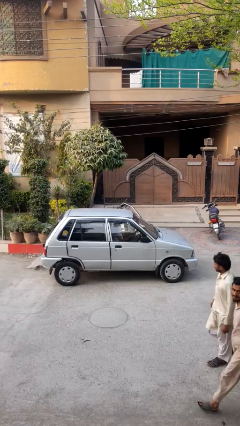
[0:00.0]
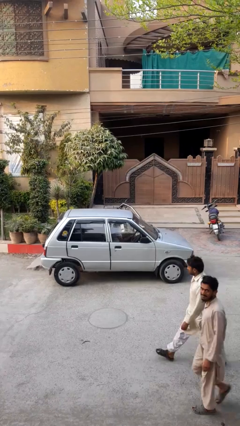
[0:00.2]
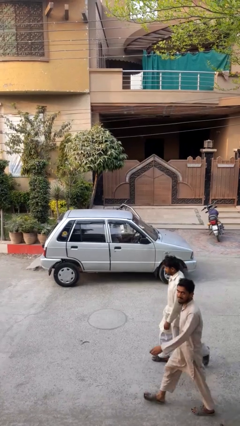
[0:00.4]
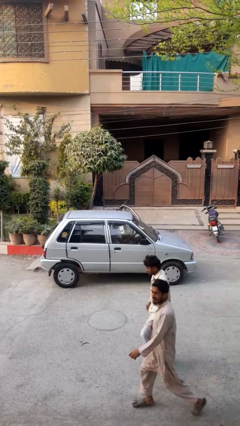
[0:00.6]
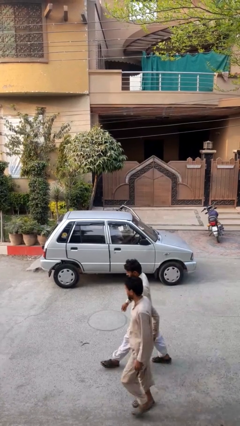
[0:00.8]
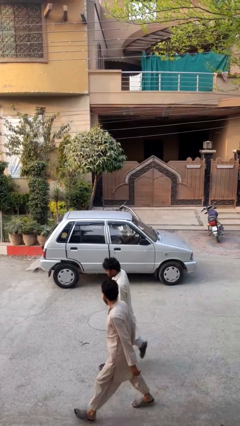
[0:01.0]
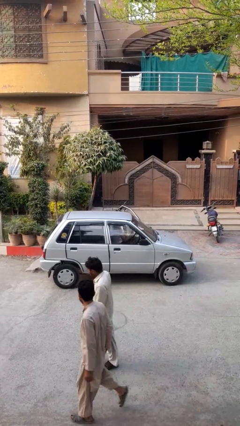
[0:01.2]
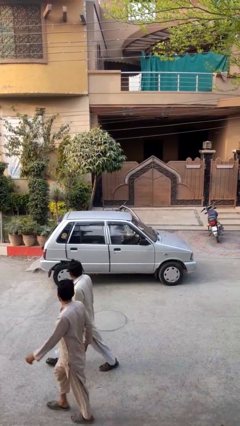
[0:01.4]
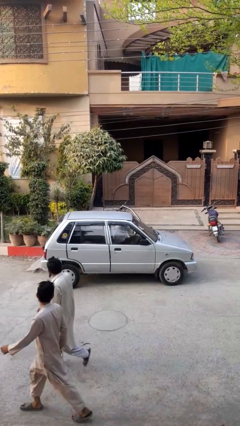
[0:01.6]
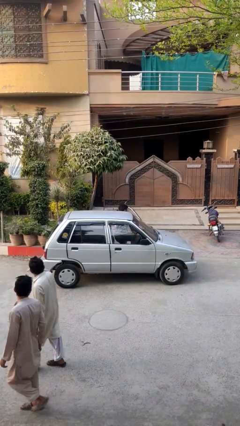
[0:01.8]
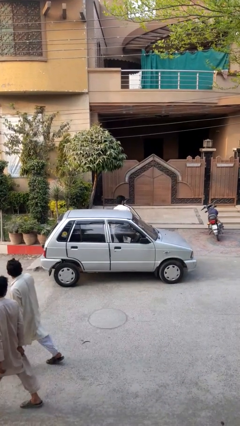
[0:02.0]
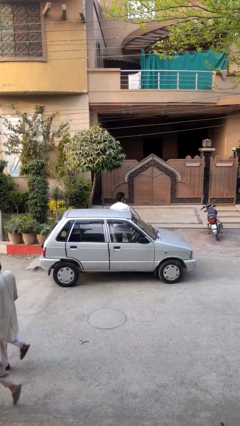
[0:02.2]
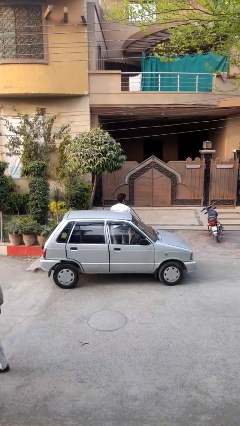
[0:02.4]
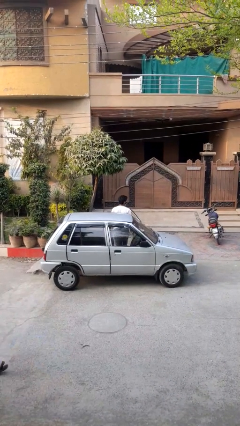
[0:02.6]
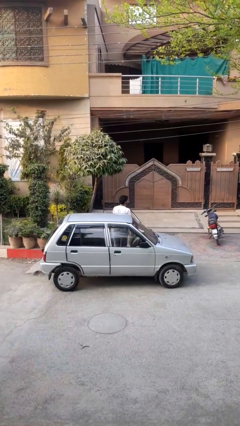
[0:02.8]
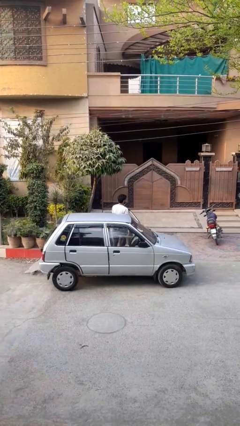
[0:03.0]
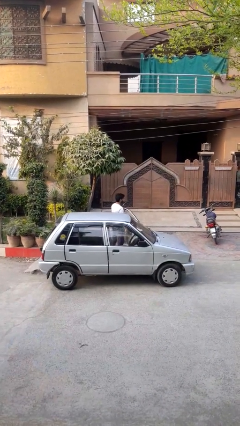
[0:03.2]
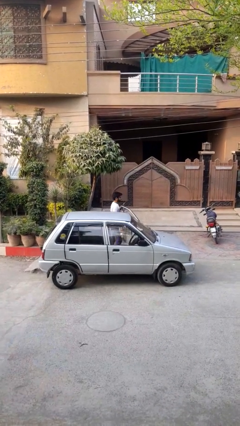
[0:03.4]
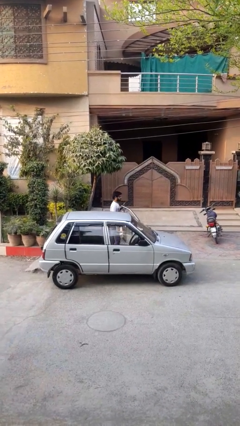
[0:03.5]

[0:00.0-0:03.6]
person exits car

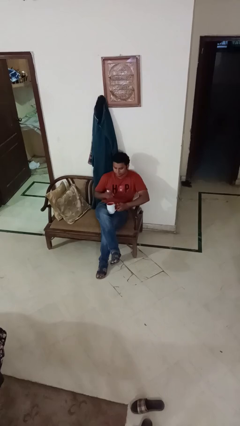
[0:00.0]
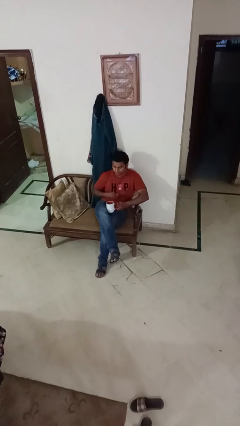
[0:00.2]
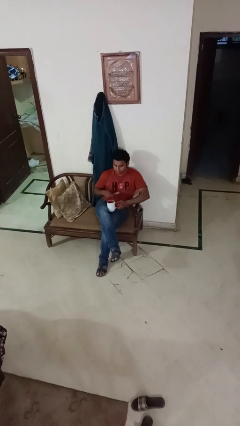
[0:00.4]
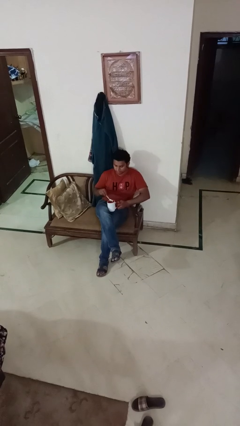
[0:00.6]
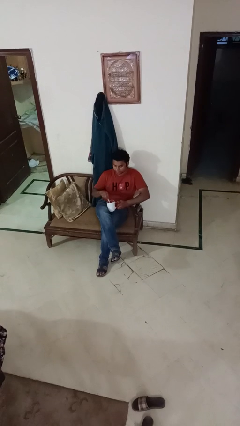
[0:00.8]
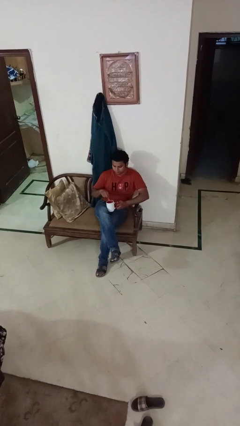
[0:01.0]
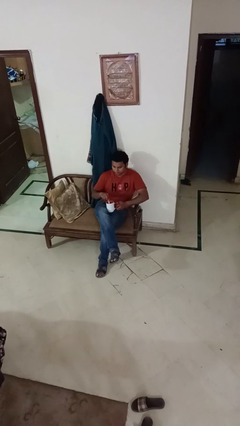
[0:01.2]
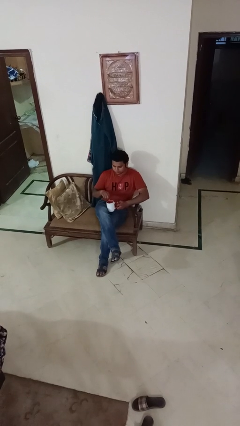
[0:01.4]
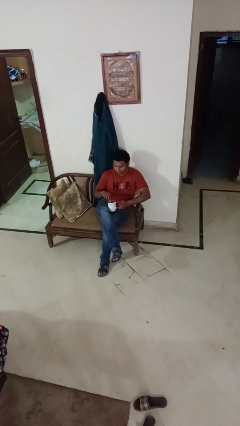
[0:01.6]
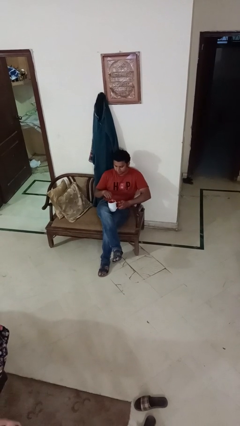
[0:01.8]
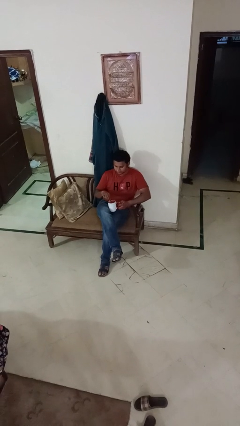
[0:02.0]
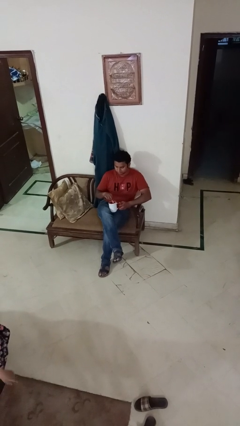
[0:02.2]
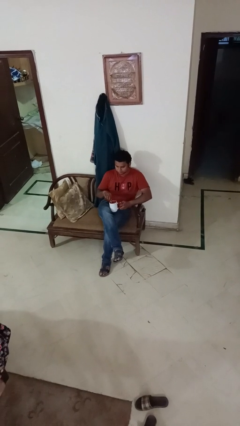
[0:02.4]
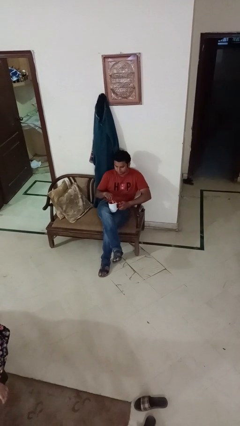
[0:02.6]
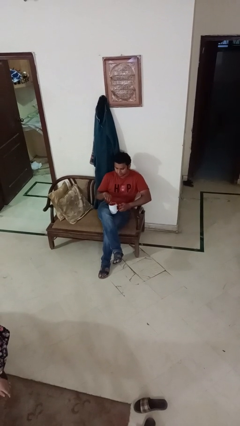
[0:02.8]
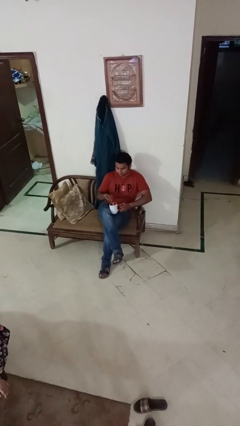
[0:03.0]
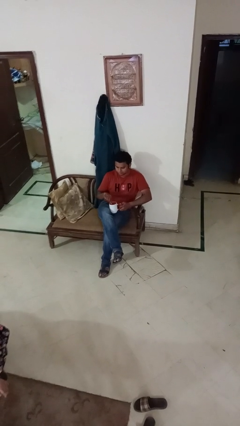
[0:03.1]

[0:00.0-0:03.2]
person stirs mug

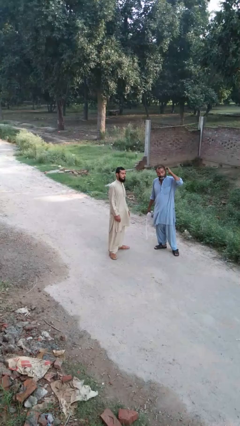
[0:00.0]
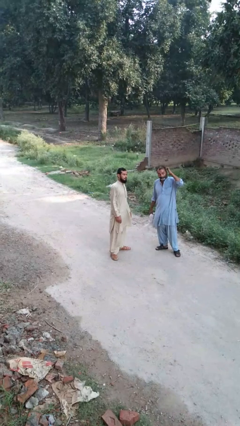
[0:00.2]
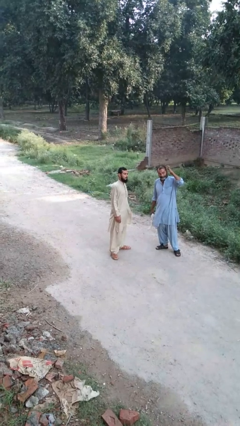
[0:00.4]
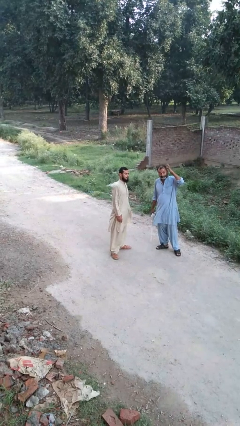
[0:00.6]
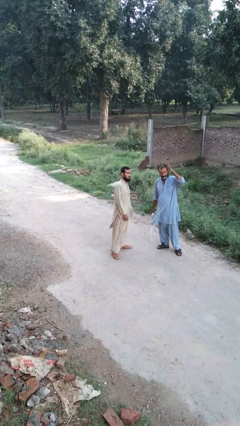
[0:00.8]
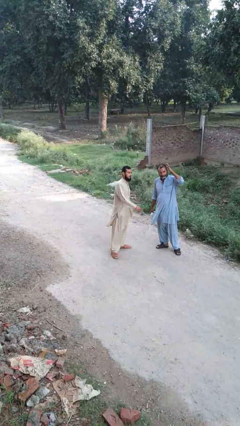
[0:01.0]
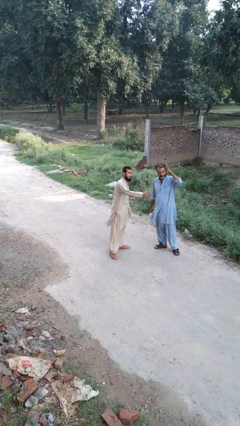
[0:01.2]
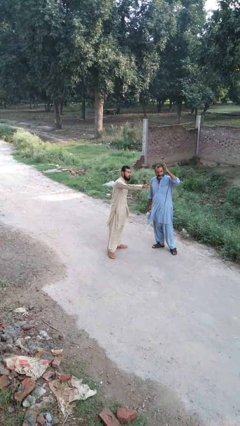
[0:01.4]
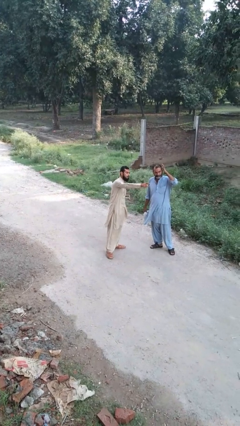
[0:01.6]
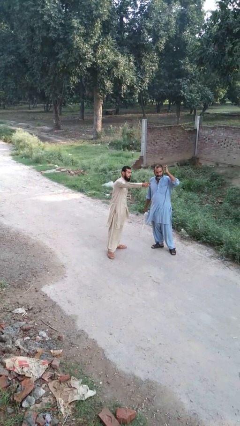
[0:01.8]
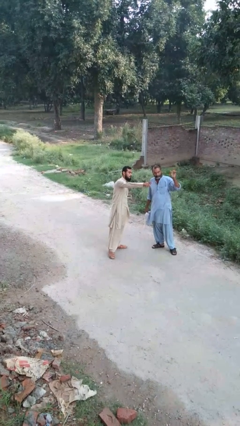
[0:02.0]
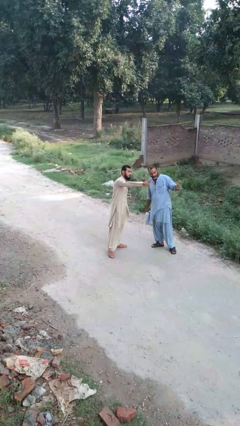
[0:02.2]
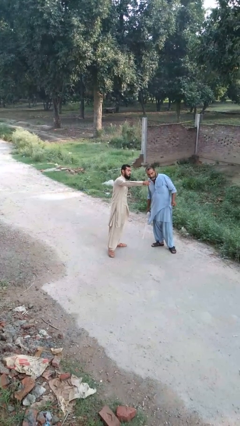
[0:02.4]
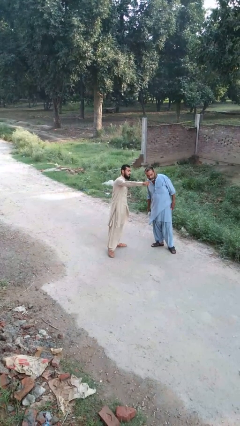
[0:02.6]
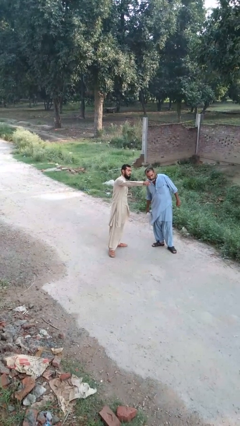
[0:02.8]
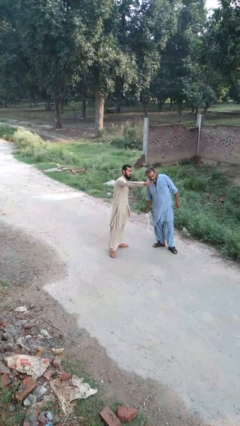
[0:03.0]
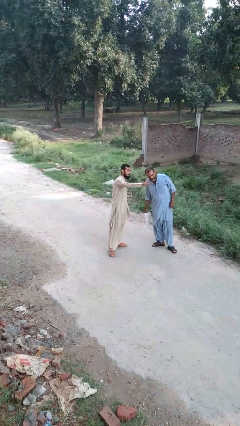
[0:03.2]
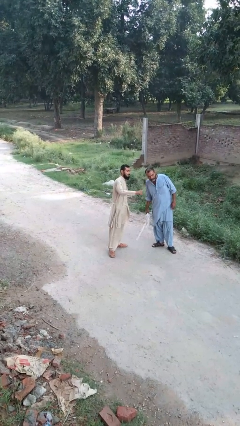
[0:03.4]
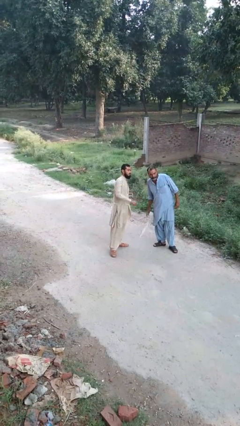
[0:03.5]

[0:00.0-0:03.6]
person points at person

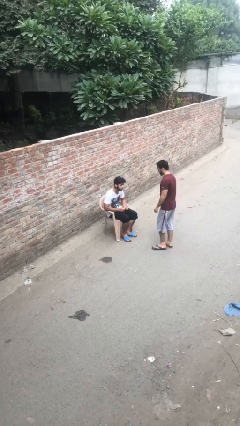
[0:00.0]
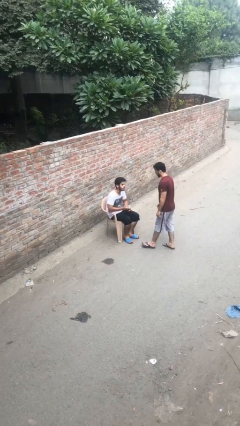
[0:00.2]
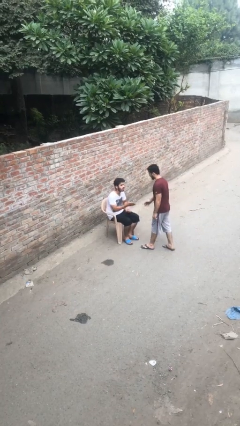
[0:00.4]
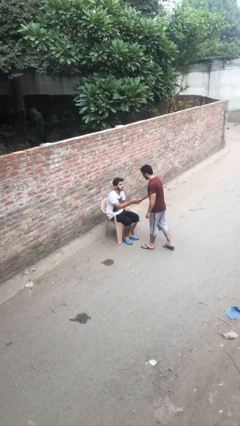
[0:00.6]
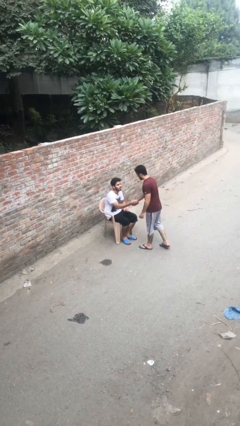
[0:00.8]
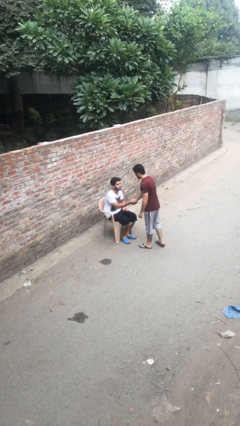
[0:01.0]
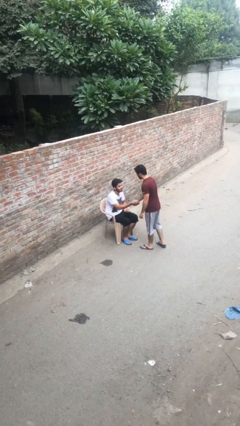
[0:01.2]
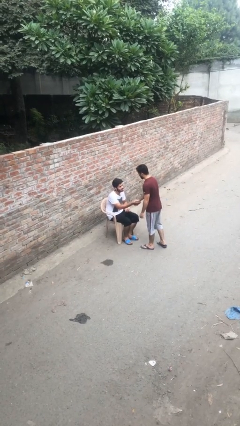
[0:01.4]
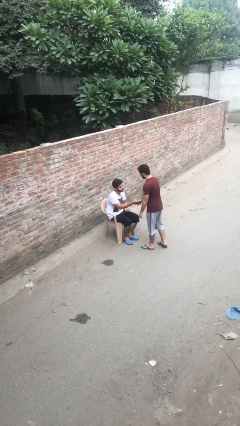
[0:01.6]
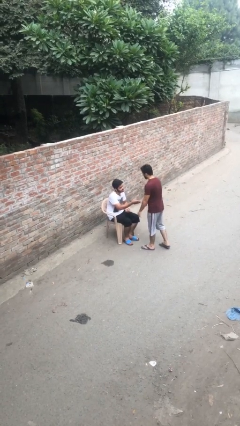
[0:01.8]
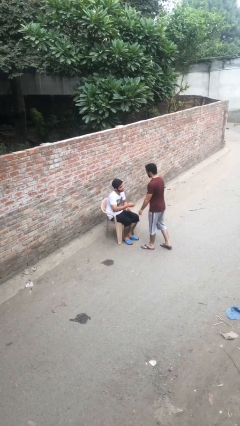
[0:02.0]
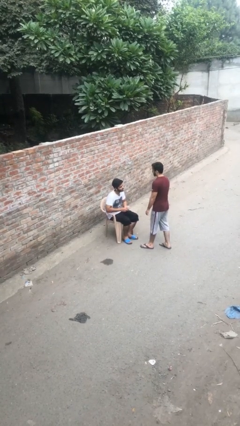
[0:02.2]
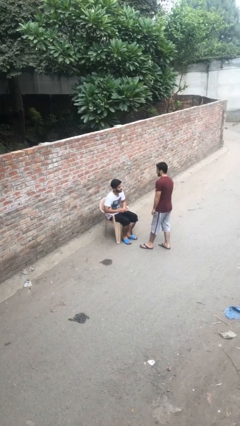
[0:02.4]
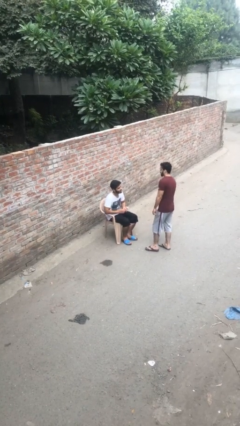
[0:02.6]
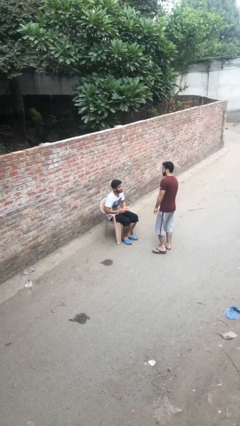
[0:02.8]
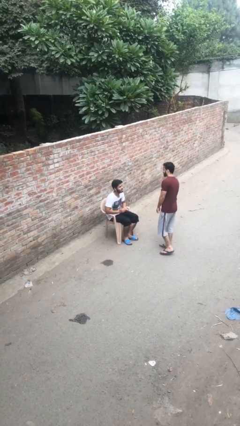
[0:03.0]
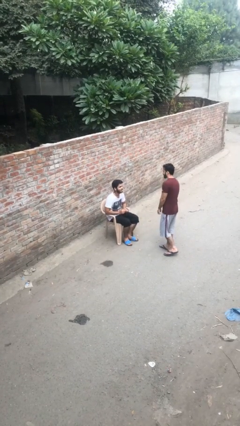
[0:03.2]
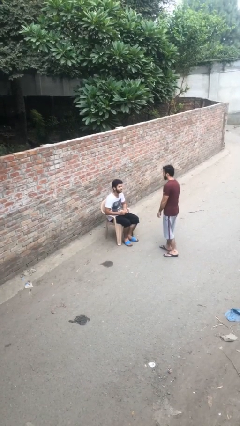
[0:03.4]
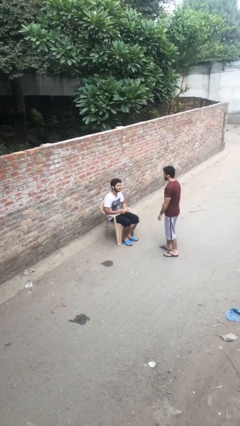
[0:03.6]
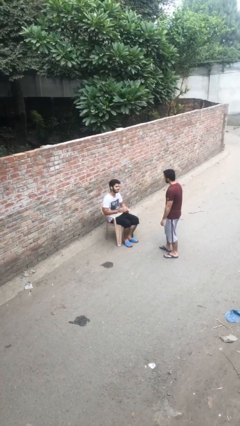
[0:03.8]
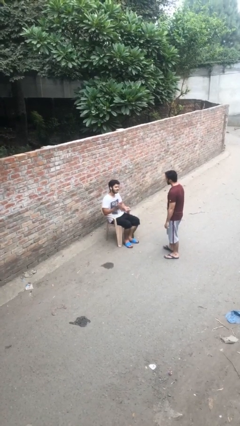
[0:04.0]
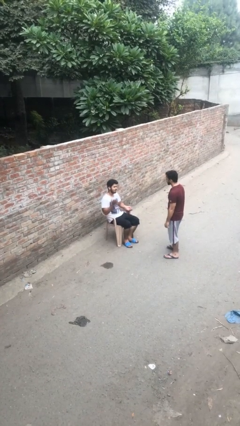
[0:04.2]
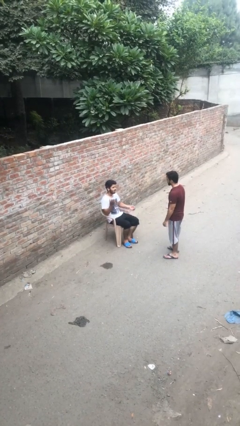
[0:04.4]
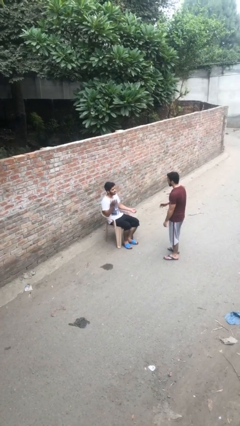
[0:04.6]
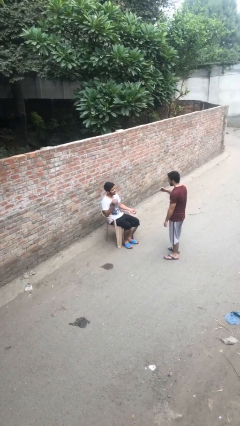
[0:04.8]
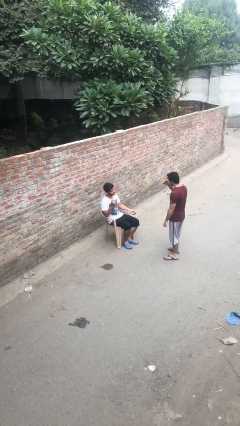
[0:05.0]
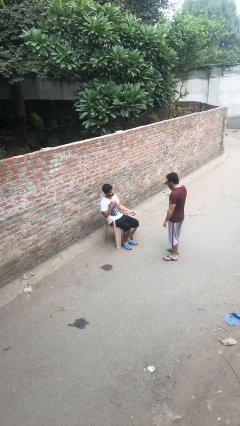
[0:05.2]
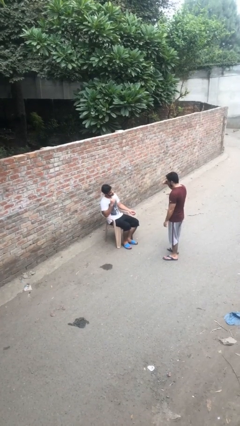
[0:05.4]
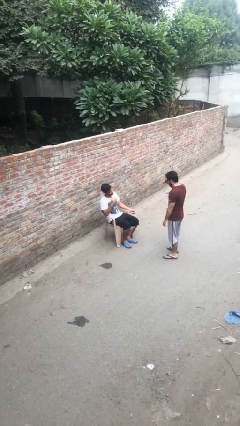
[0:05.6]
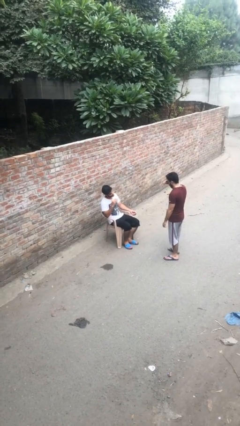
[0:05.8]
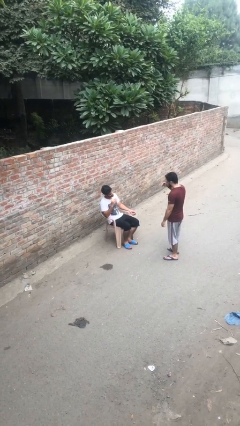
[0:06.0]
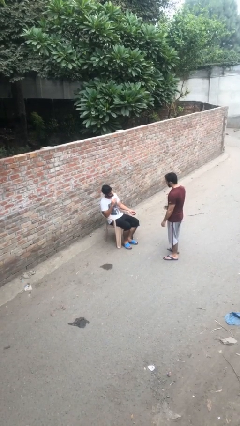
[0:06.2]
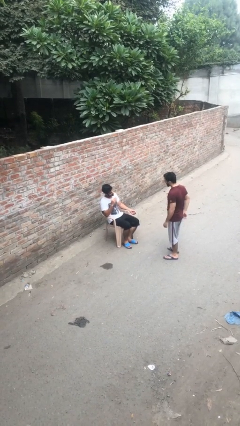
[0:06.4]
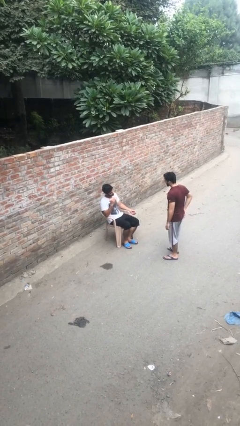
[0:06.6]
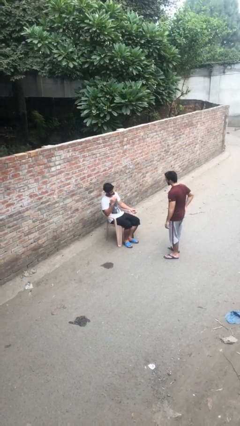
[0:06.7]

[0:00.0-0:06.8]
person shakes hand

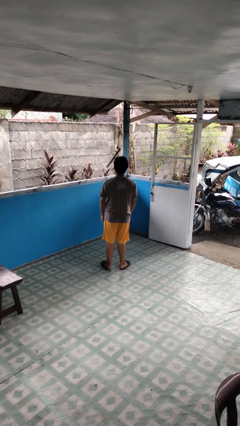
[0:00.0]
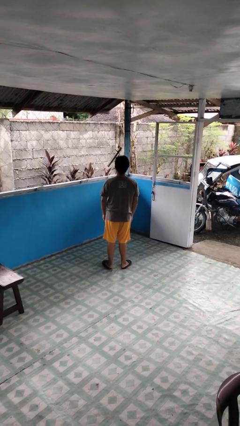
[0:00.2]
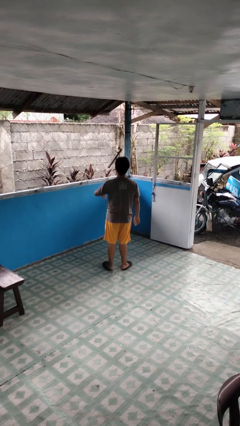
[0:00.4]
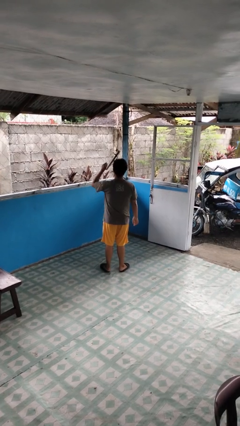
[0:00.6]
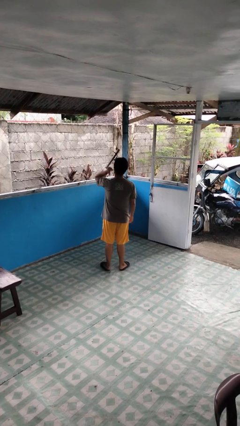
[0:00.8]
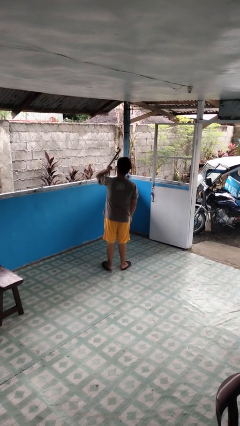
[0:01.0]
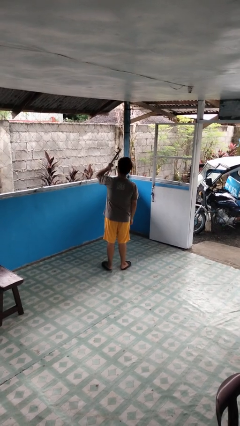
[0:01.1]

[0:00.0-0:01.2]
person gestures behind me
